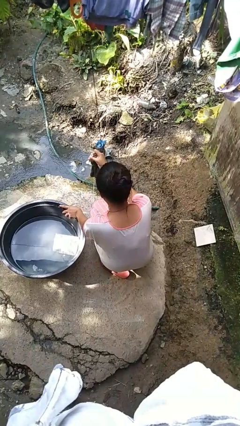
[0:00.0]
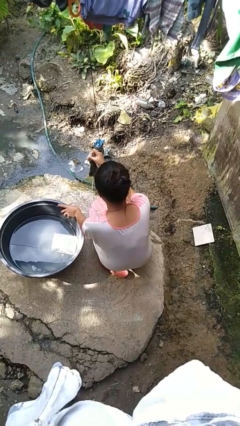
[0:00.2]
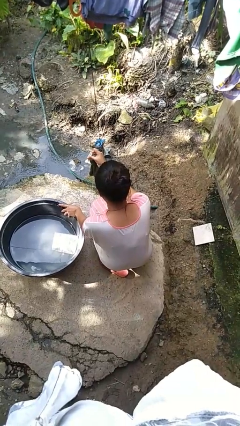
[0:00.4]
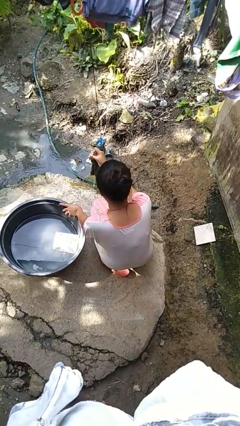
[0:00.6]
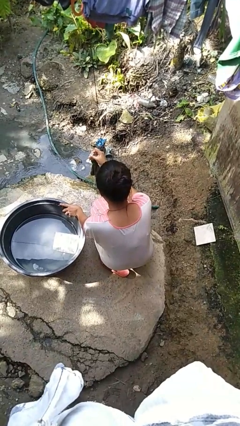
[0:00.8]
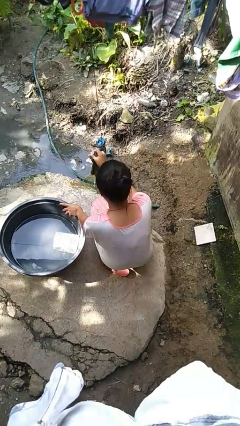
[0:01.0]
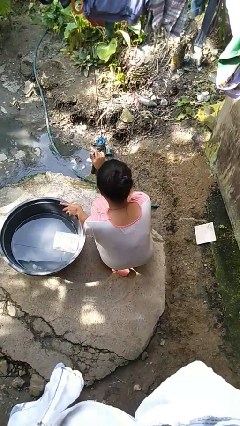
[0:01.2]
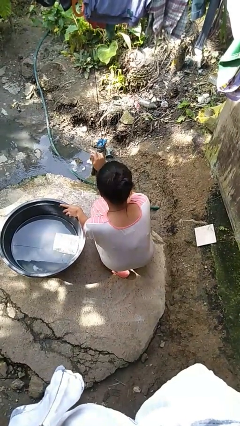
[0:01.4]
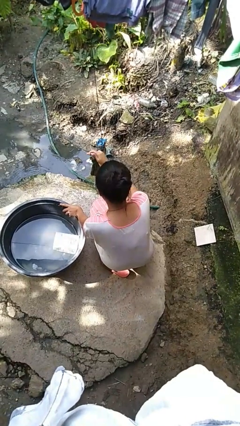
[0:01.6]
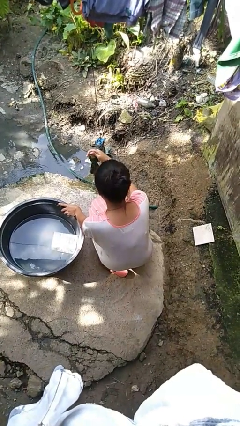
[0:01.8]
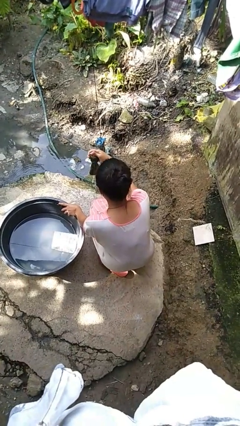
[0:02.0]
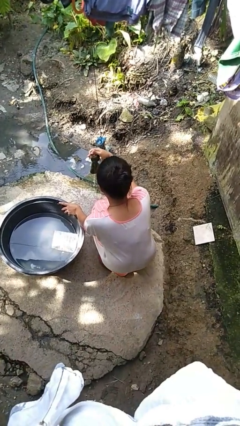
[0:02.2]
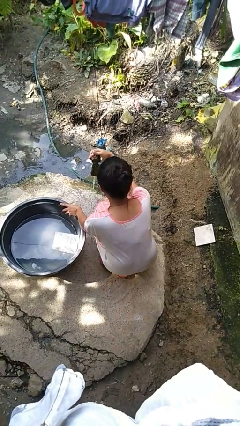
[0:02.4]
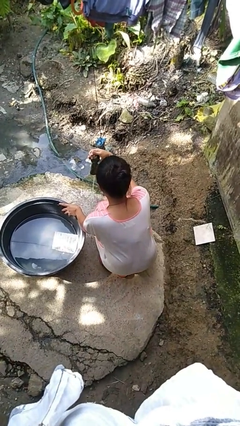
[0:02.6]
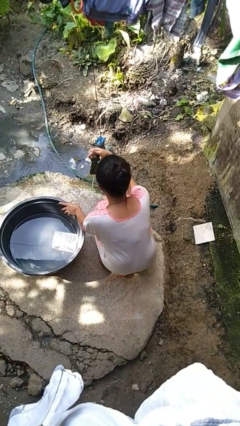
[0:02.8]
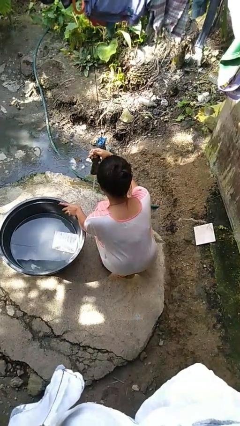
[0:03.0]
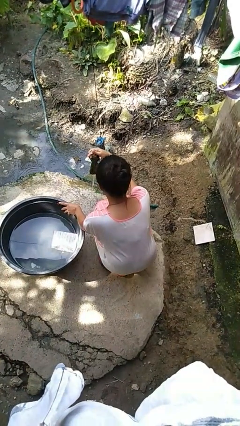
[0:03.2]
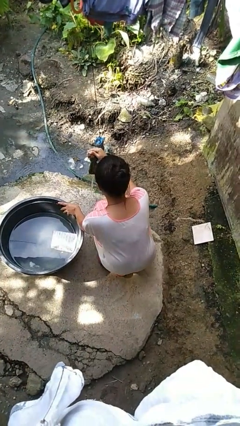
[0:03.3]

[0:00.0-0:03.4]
person turns on faucet

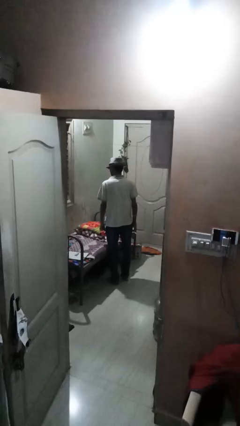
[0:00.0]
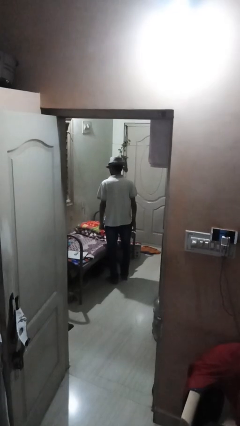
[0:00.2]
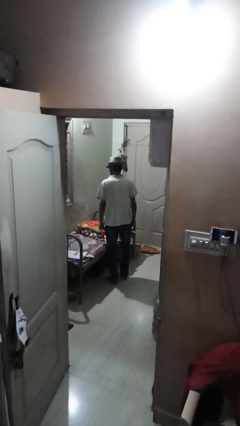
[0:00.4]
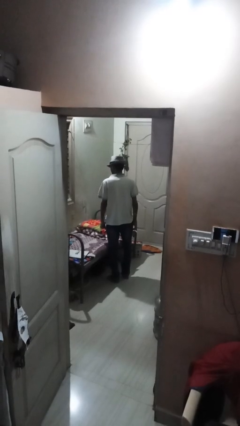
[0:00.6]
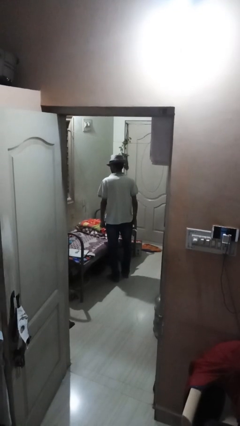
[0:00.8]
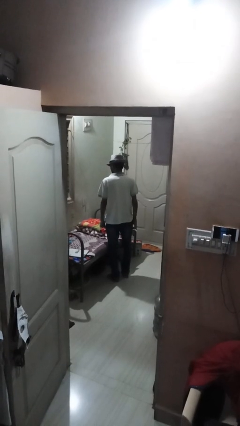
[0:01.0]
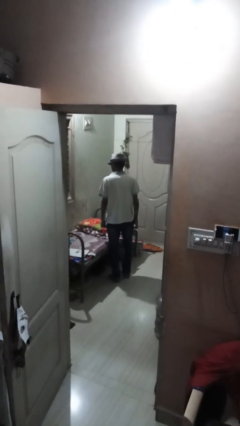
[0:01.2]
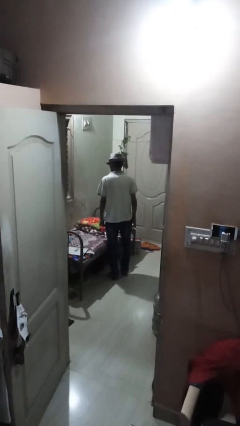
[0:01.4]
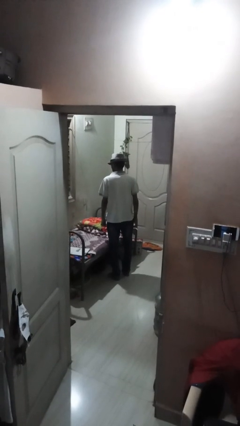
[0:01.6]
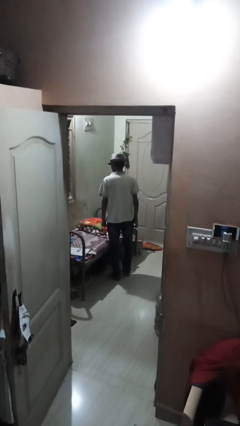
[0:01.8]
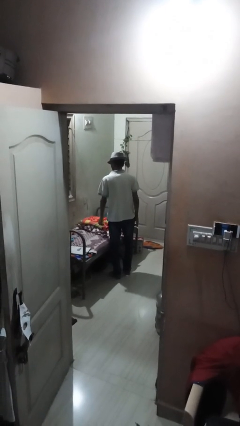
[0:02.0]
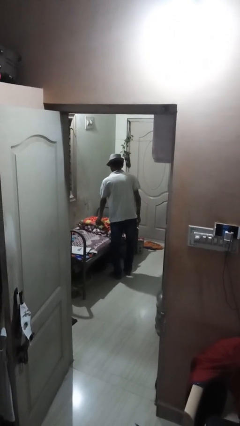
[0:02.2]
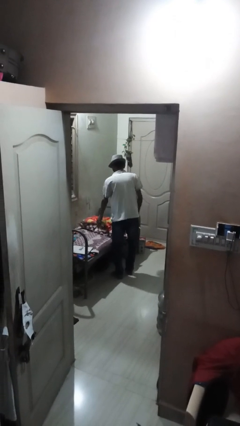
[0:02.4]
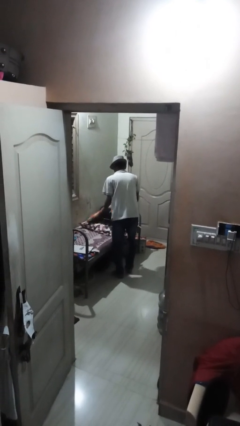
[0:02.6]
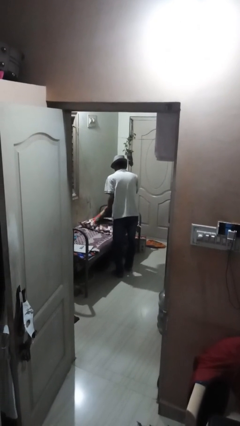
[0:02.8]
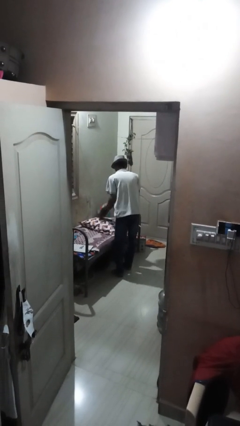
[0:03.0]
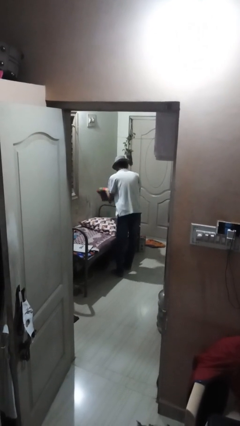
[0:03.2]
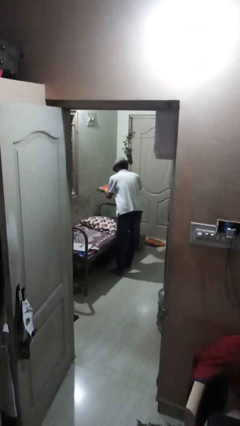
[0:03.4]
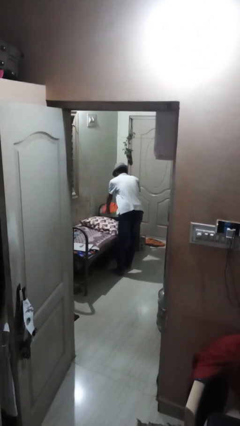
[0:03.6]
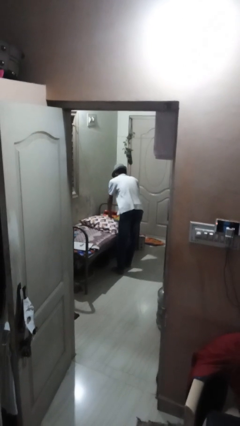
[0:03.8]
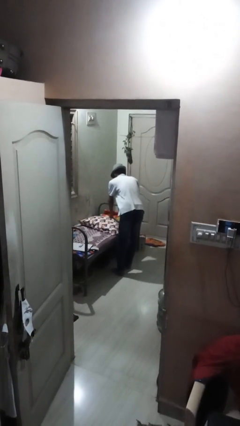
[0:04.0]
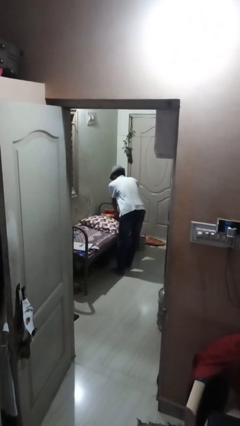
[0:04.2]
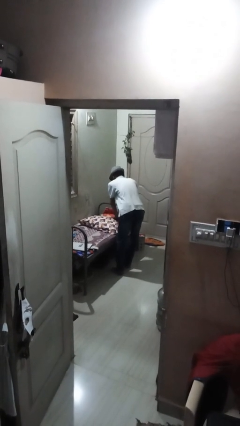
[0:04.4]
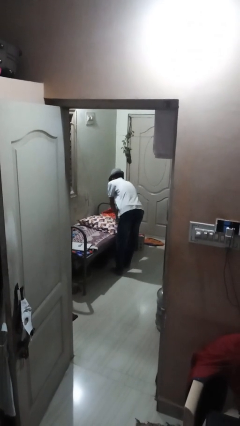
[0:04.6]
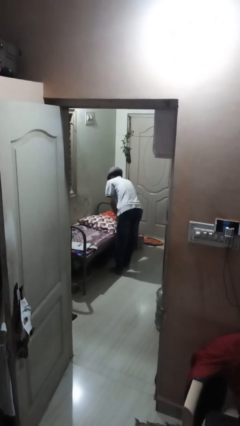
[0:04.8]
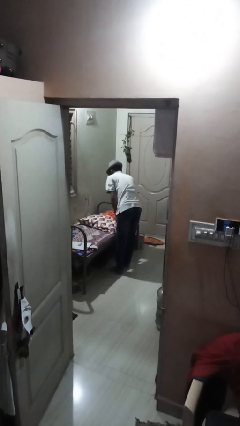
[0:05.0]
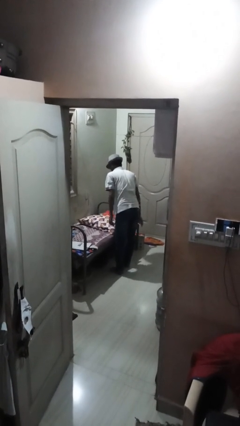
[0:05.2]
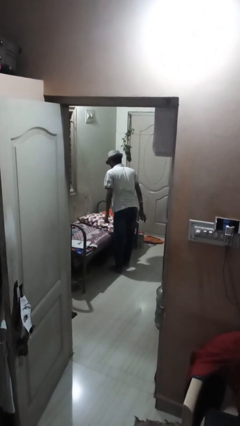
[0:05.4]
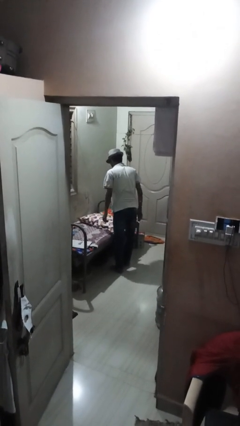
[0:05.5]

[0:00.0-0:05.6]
person makes bed

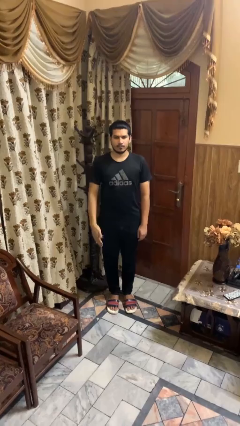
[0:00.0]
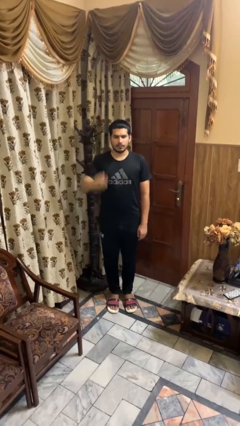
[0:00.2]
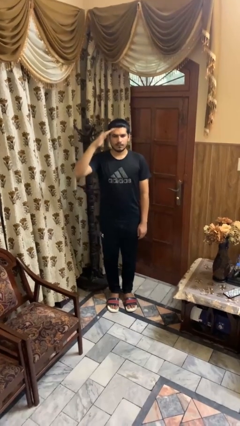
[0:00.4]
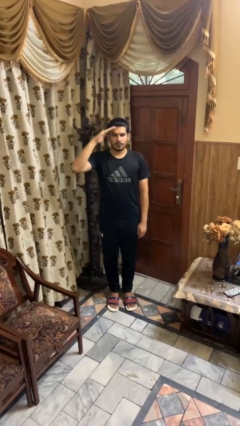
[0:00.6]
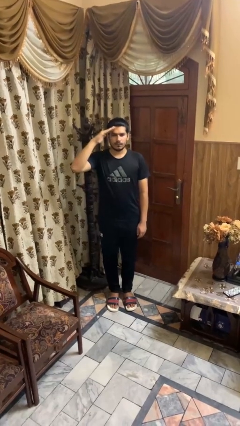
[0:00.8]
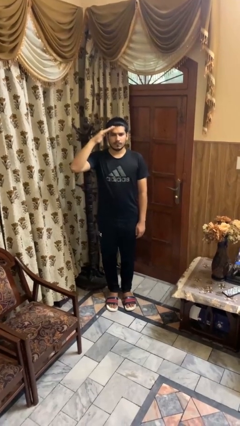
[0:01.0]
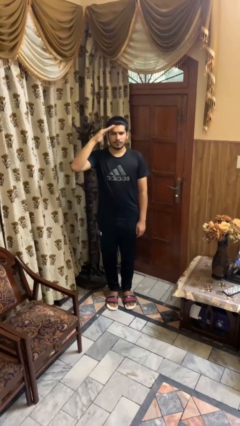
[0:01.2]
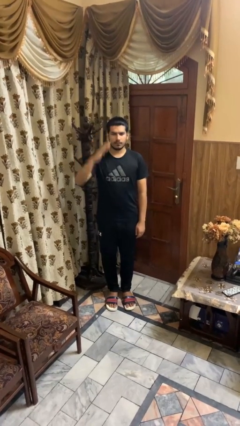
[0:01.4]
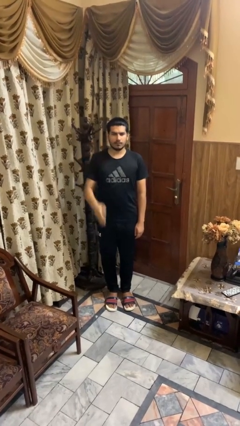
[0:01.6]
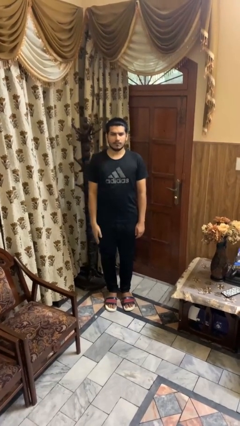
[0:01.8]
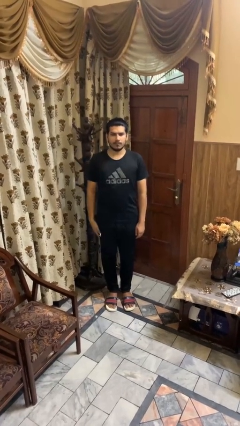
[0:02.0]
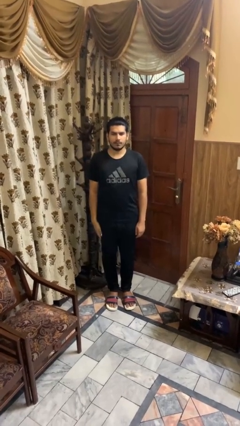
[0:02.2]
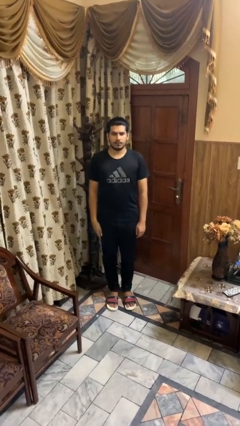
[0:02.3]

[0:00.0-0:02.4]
person salutes

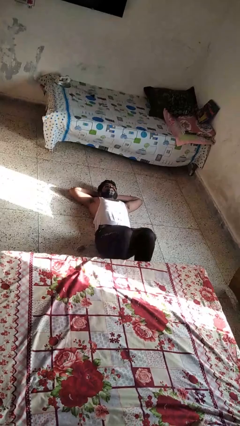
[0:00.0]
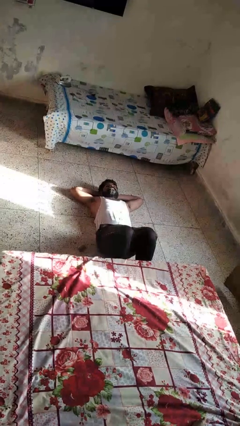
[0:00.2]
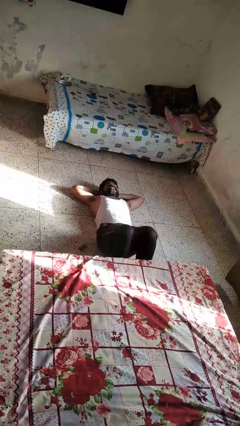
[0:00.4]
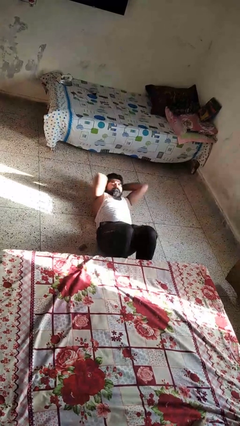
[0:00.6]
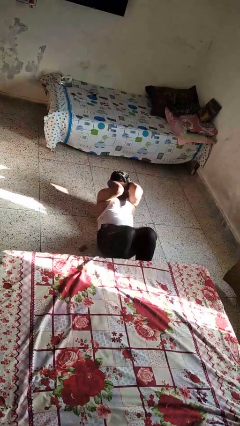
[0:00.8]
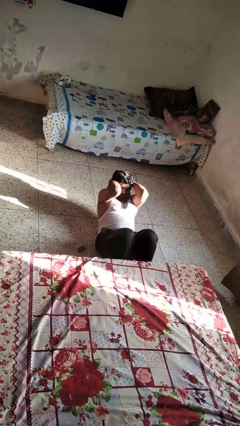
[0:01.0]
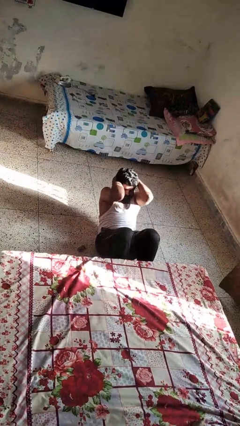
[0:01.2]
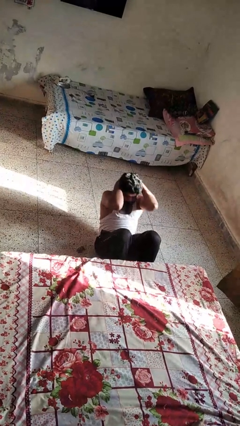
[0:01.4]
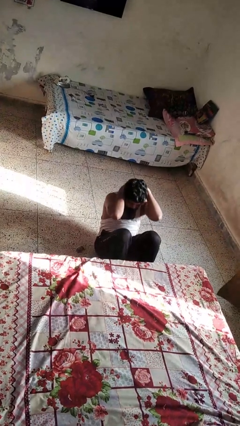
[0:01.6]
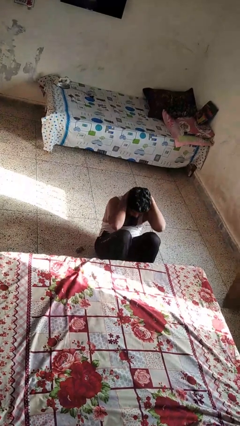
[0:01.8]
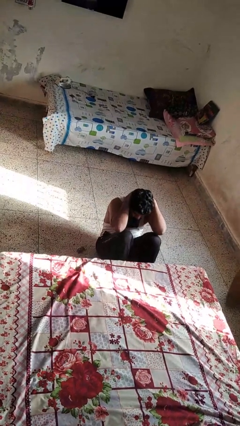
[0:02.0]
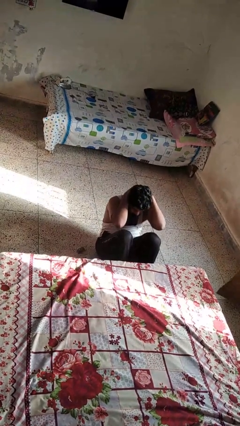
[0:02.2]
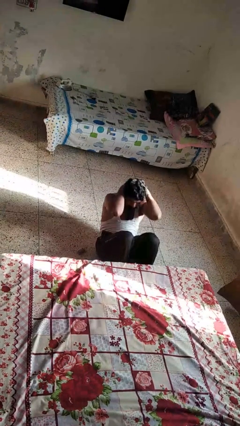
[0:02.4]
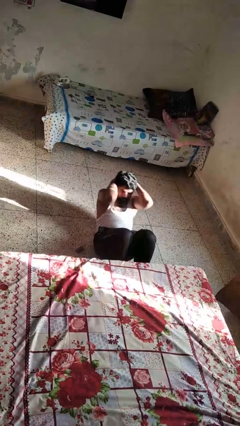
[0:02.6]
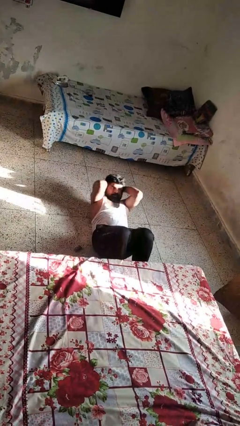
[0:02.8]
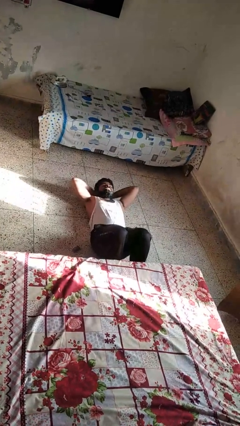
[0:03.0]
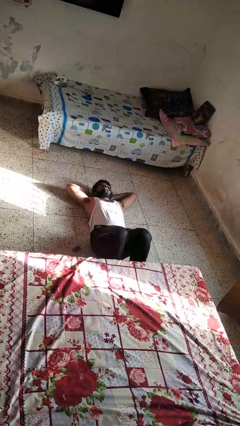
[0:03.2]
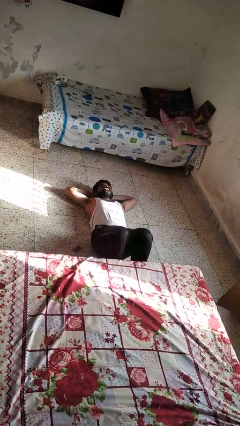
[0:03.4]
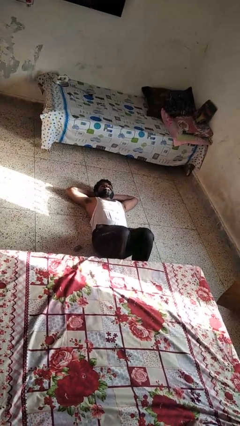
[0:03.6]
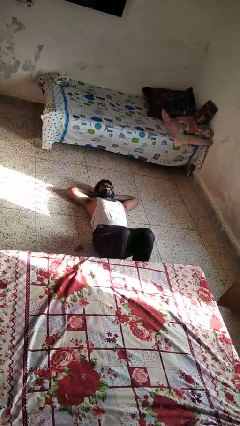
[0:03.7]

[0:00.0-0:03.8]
person exercises with situp

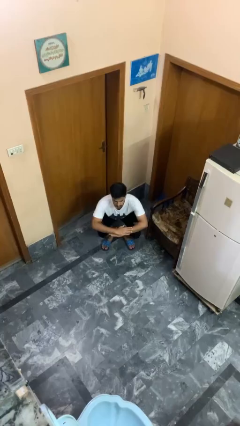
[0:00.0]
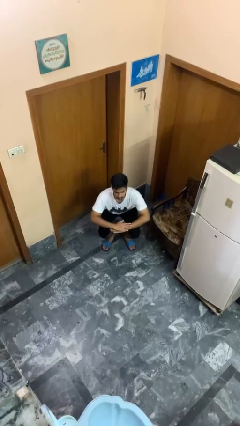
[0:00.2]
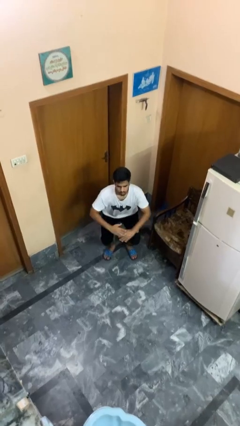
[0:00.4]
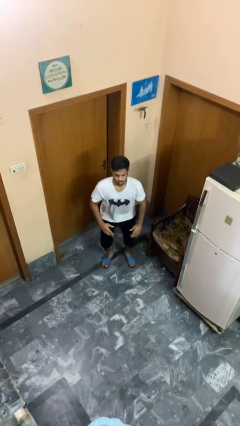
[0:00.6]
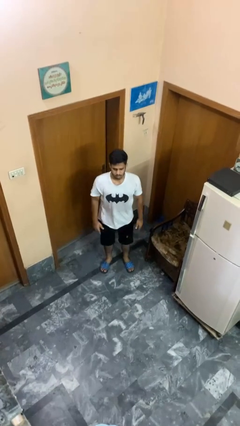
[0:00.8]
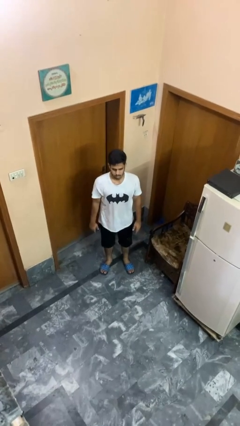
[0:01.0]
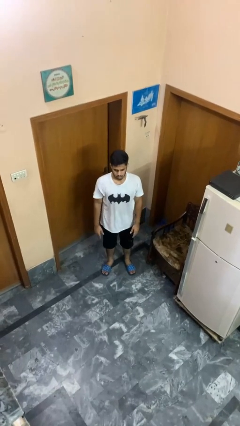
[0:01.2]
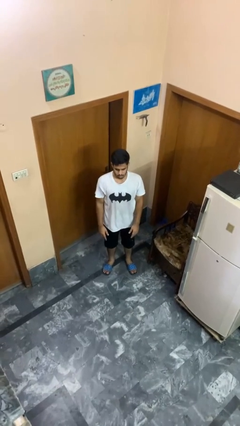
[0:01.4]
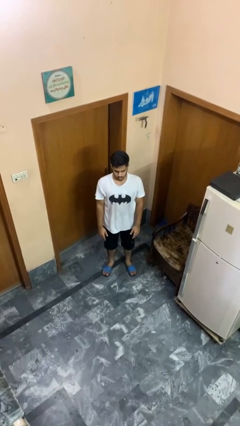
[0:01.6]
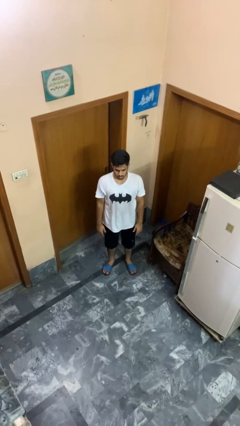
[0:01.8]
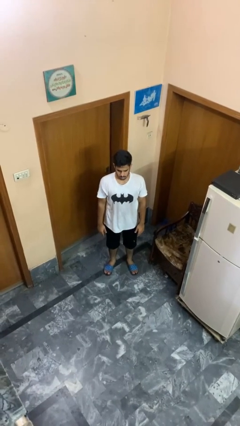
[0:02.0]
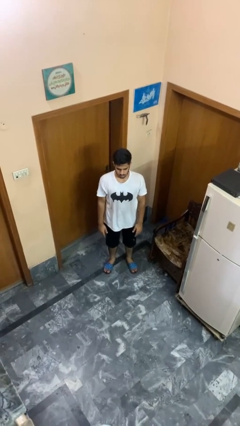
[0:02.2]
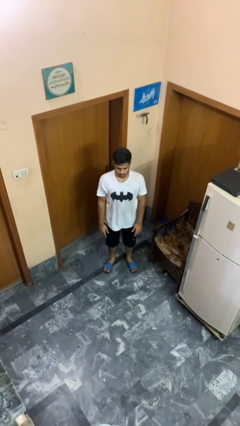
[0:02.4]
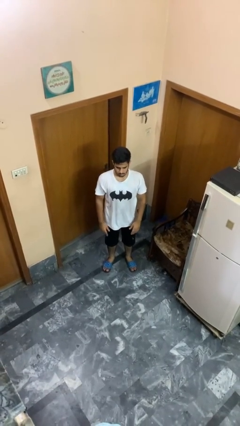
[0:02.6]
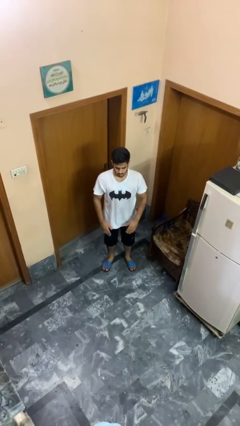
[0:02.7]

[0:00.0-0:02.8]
person stands up
